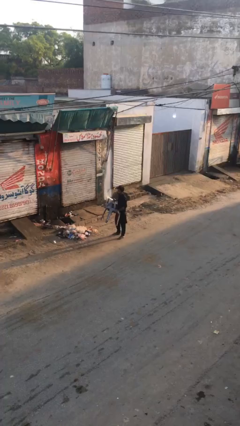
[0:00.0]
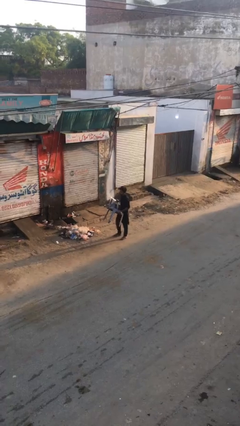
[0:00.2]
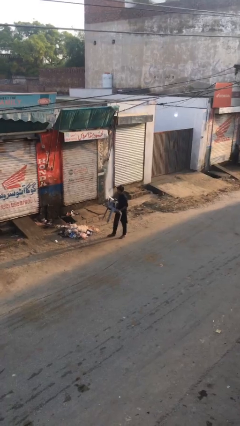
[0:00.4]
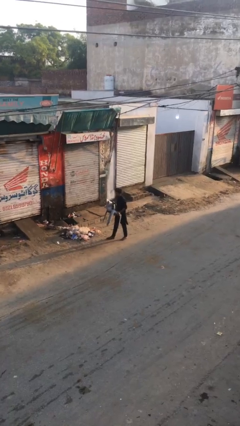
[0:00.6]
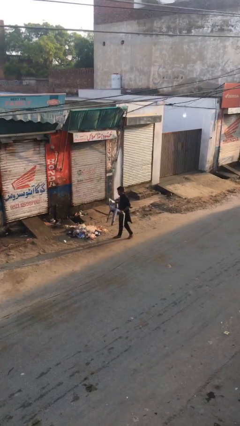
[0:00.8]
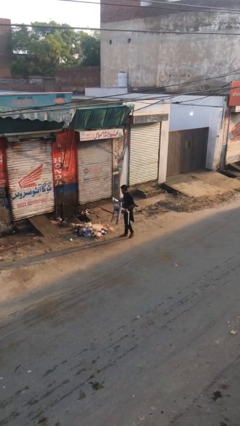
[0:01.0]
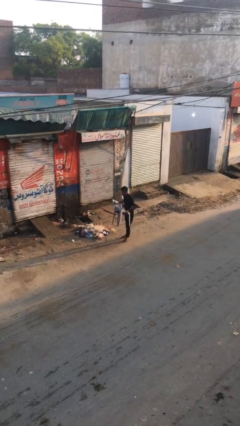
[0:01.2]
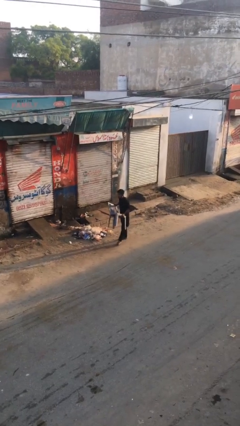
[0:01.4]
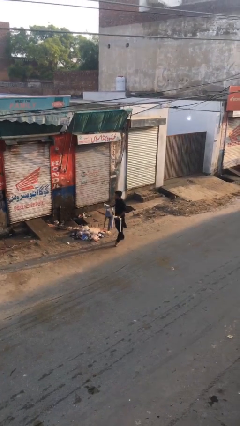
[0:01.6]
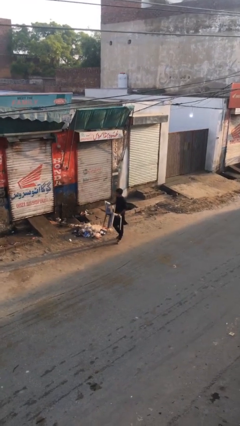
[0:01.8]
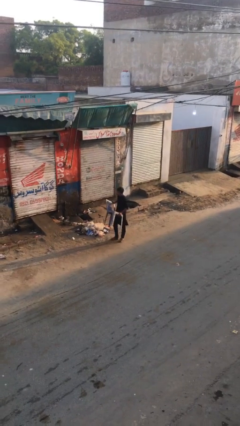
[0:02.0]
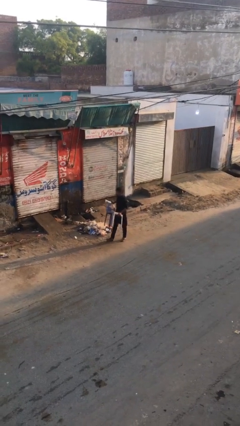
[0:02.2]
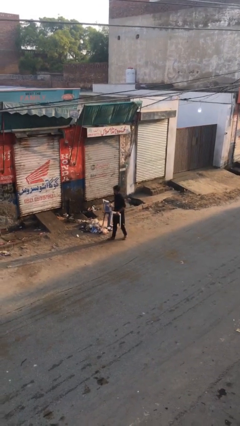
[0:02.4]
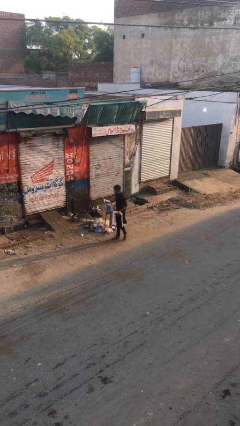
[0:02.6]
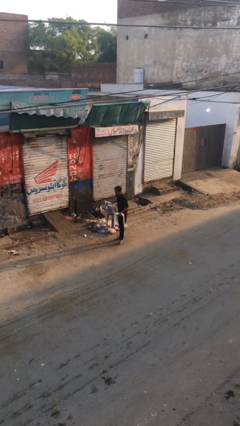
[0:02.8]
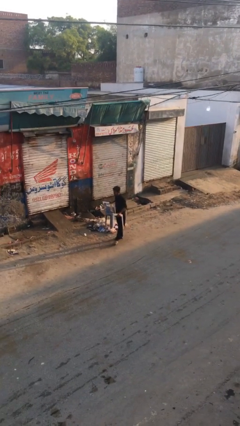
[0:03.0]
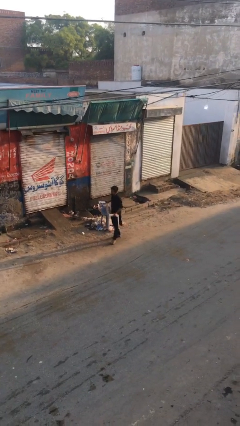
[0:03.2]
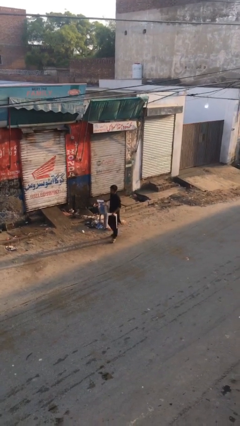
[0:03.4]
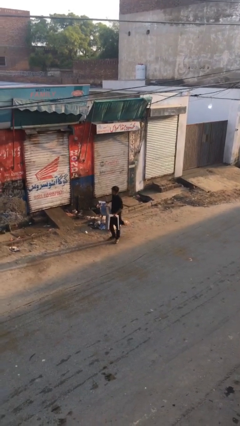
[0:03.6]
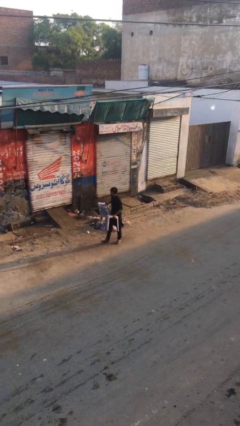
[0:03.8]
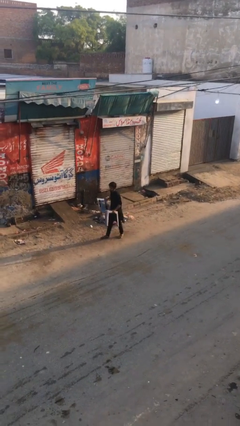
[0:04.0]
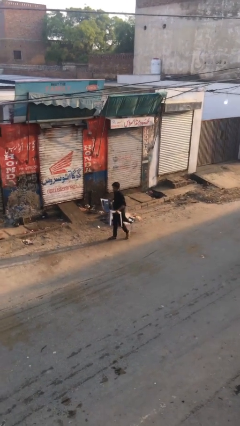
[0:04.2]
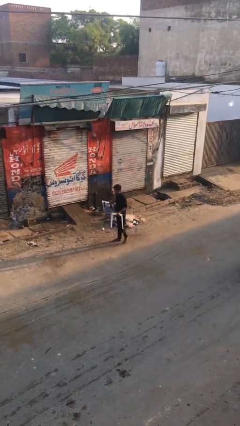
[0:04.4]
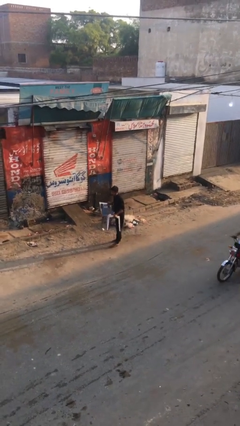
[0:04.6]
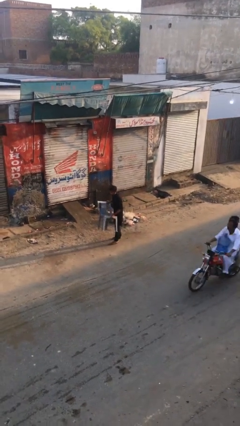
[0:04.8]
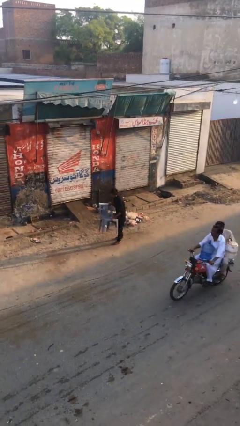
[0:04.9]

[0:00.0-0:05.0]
person carries heavy object

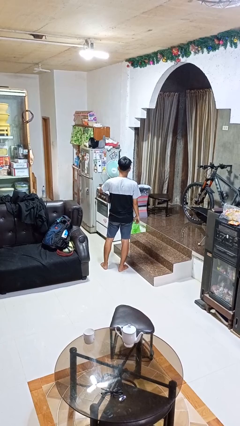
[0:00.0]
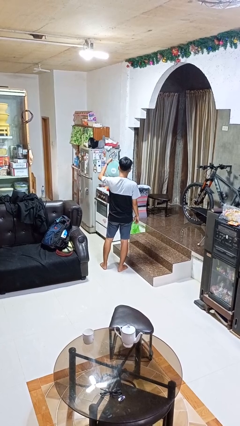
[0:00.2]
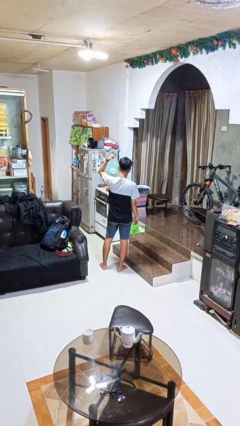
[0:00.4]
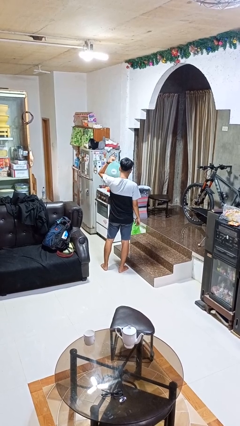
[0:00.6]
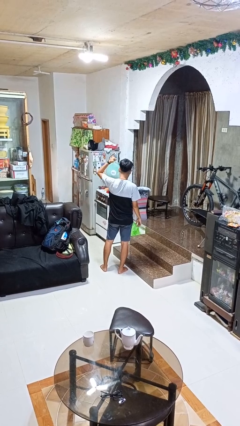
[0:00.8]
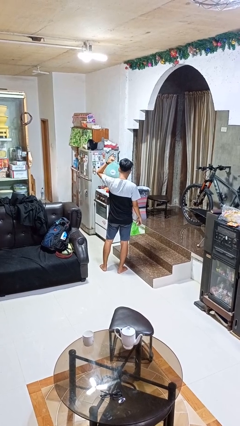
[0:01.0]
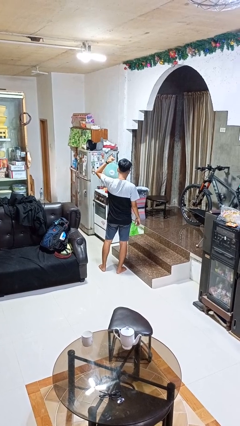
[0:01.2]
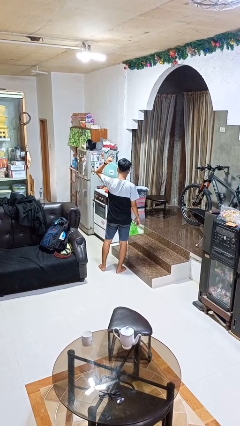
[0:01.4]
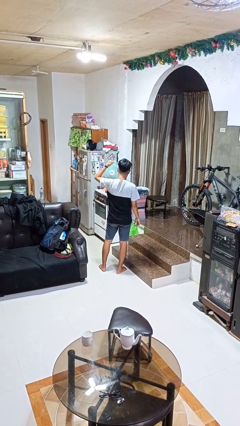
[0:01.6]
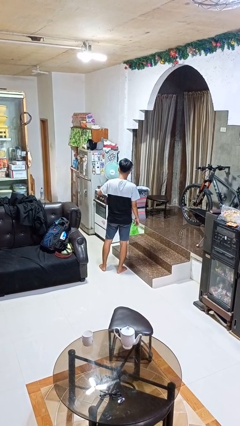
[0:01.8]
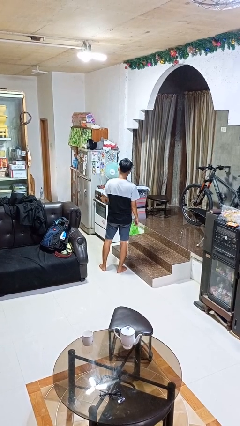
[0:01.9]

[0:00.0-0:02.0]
person gestures behind me

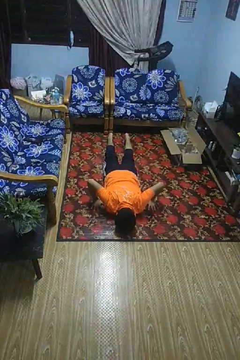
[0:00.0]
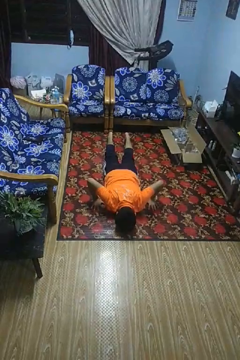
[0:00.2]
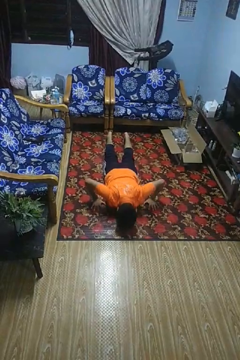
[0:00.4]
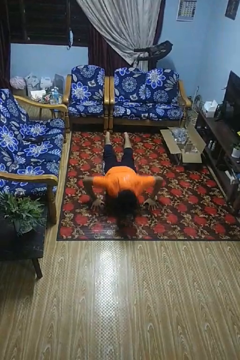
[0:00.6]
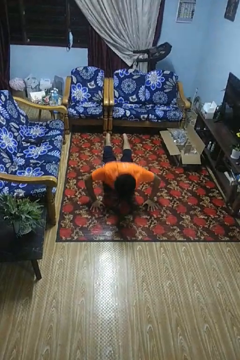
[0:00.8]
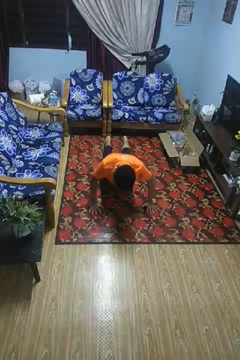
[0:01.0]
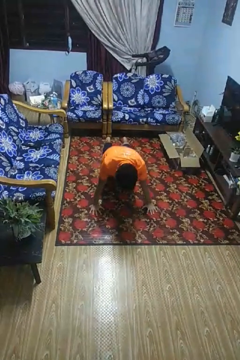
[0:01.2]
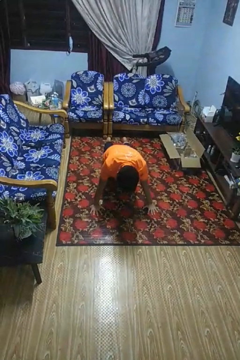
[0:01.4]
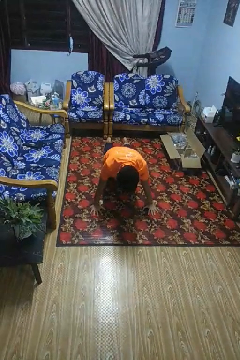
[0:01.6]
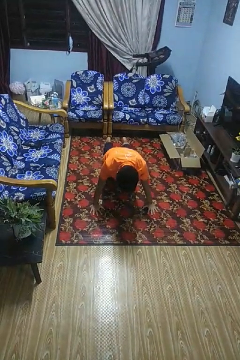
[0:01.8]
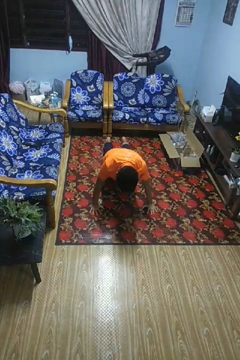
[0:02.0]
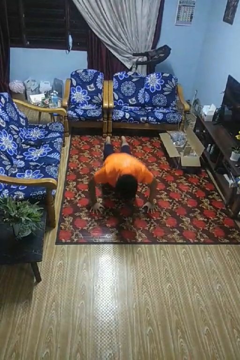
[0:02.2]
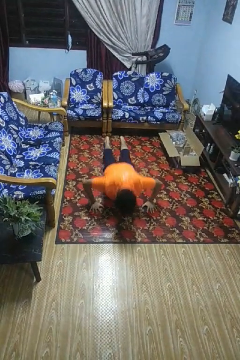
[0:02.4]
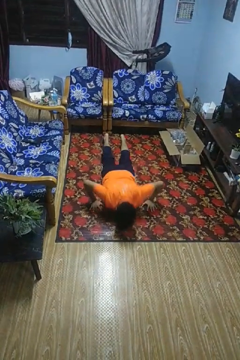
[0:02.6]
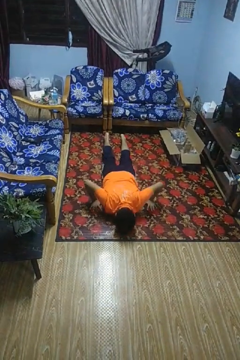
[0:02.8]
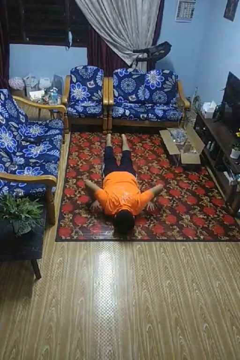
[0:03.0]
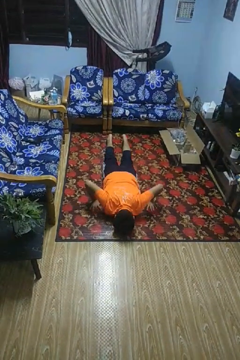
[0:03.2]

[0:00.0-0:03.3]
person exercises with pushup

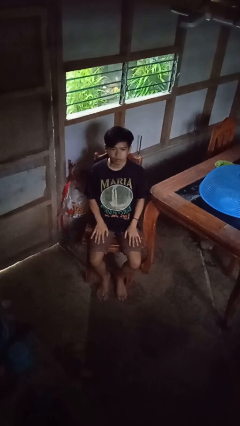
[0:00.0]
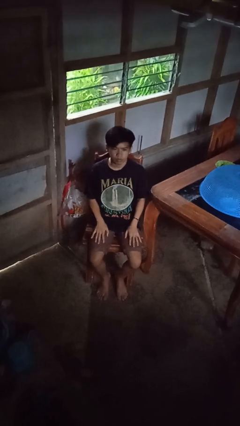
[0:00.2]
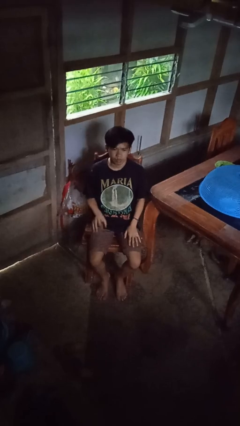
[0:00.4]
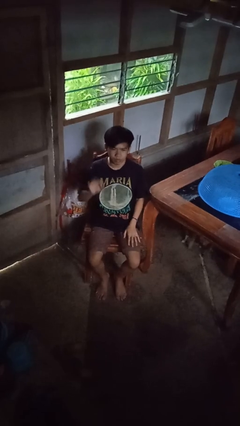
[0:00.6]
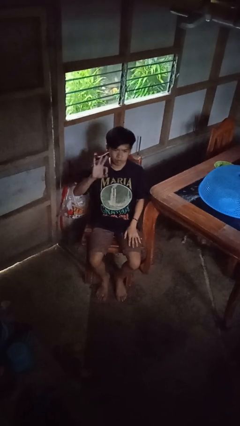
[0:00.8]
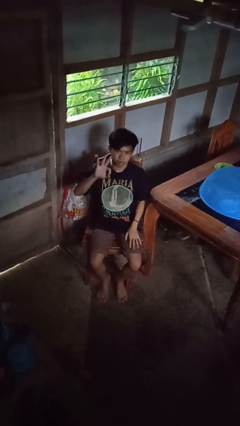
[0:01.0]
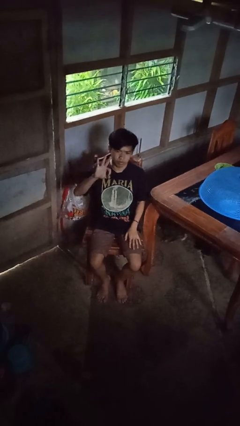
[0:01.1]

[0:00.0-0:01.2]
person gestures number three

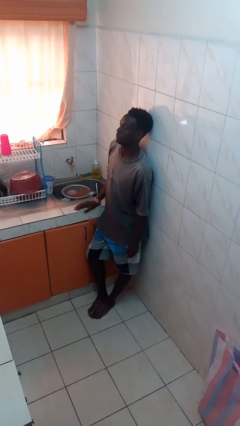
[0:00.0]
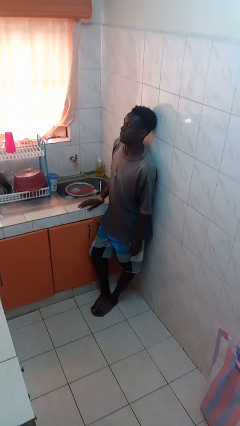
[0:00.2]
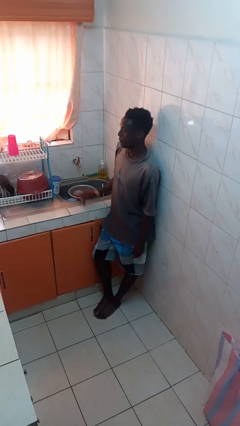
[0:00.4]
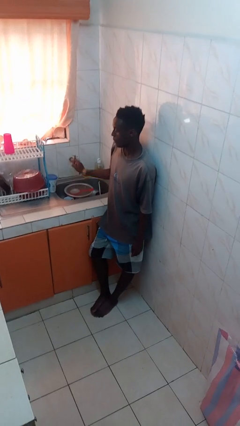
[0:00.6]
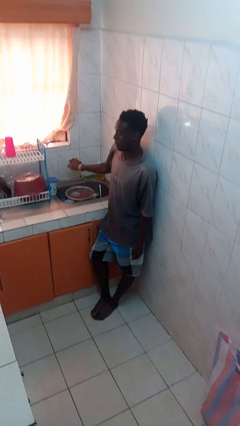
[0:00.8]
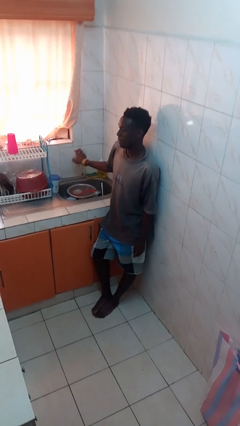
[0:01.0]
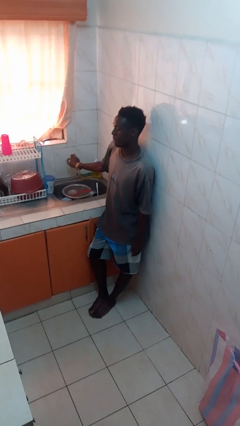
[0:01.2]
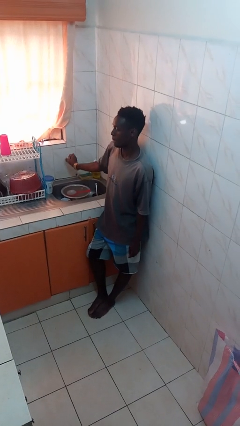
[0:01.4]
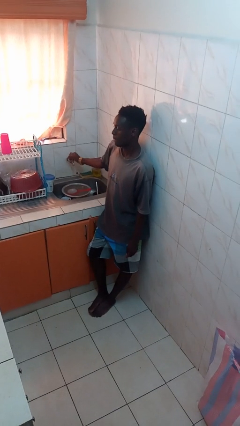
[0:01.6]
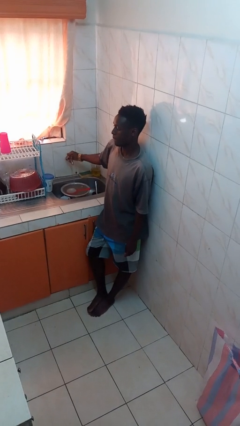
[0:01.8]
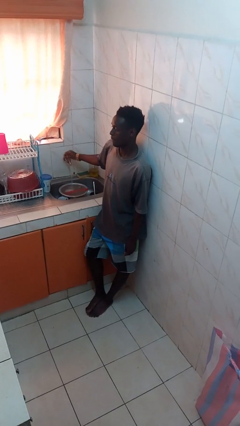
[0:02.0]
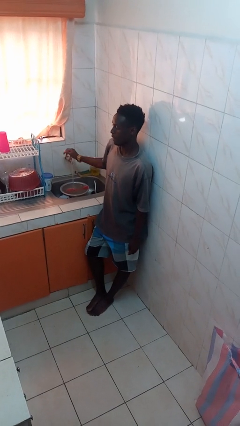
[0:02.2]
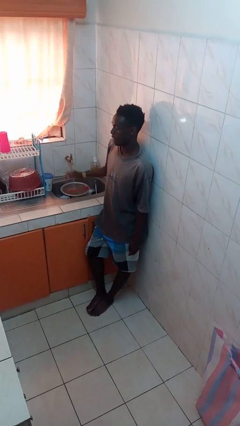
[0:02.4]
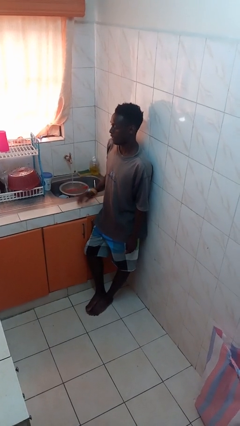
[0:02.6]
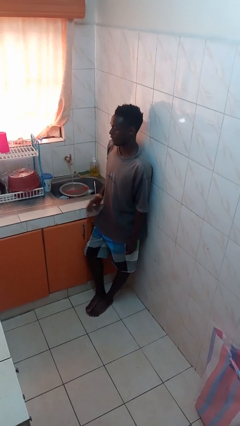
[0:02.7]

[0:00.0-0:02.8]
person turns on faucet

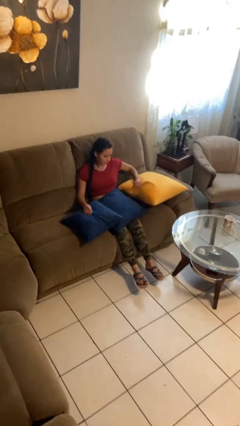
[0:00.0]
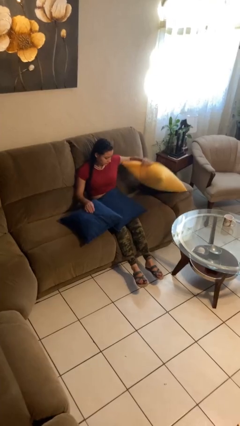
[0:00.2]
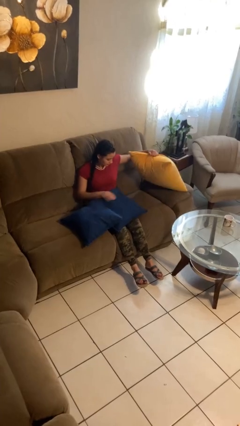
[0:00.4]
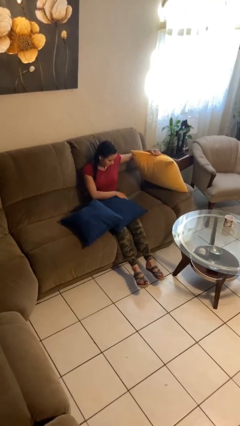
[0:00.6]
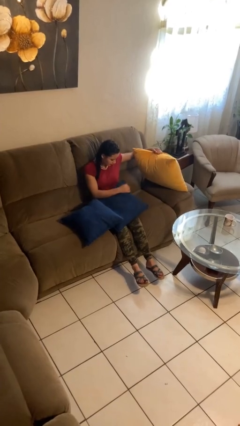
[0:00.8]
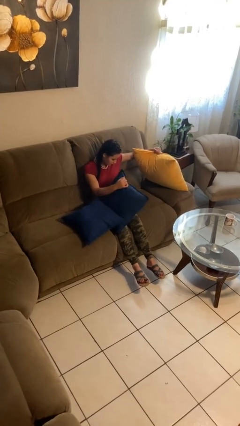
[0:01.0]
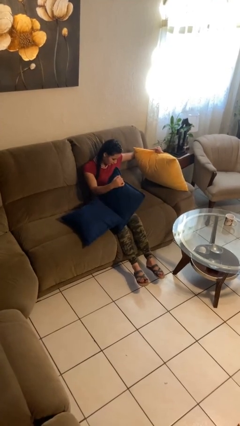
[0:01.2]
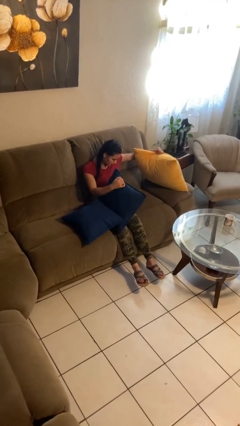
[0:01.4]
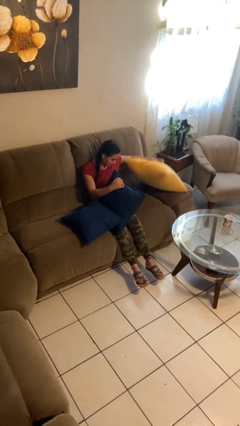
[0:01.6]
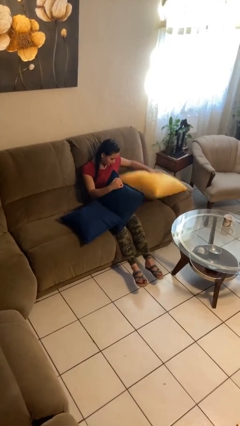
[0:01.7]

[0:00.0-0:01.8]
person searches in couch

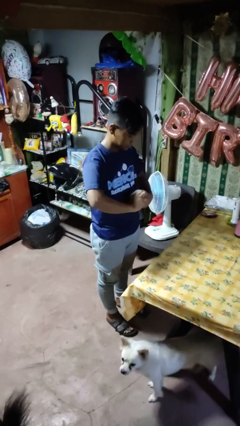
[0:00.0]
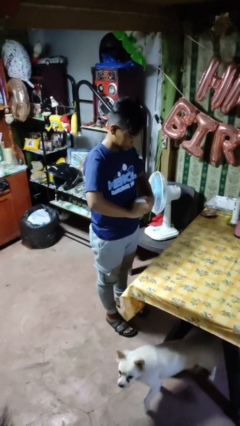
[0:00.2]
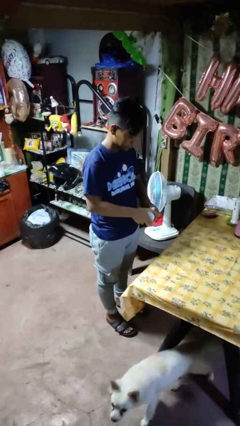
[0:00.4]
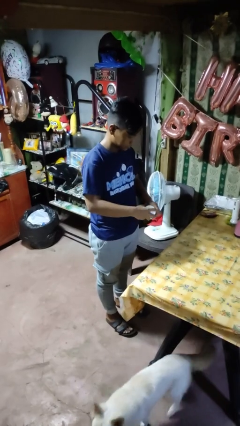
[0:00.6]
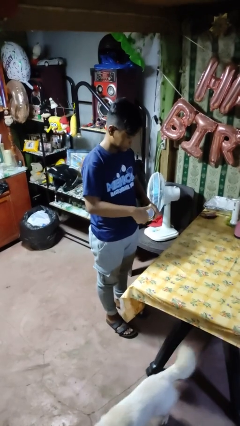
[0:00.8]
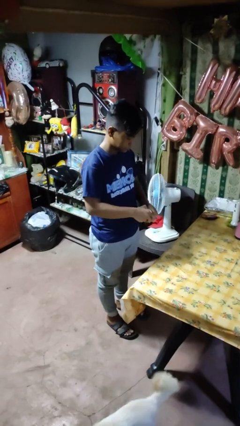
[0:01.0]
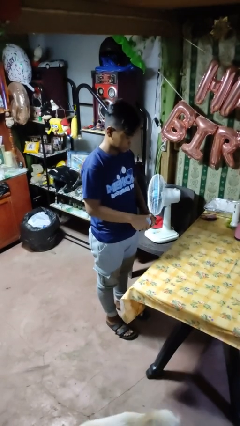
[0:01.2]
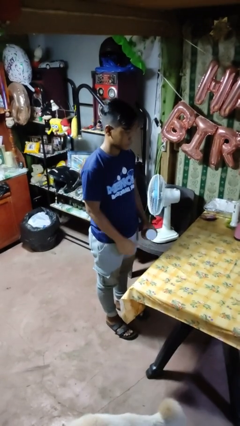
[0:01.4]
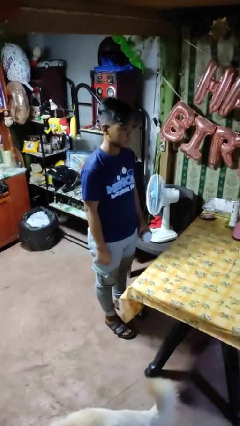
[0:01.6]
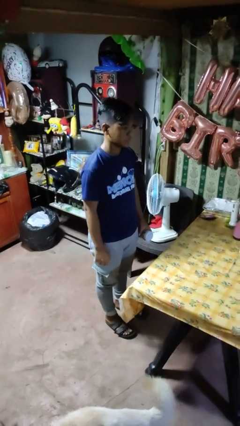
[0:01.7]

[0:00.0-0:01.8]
person closes jar

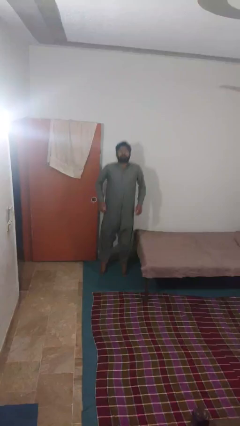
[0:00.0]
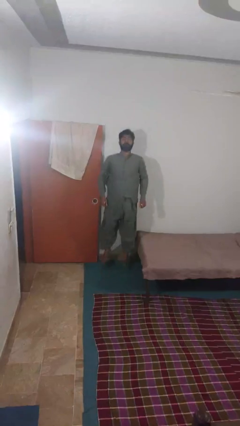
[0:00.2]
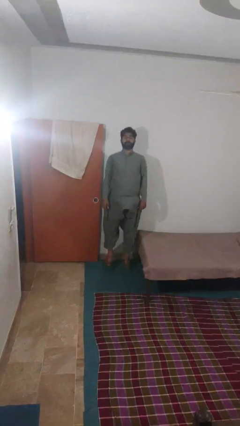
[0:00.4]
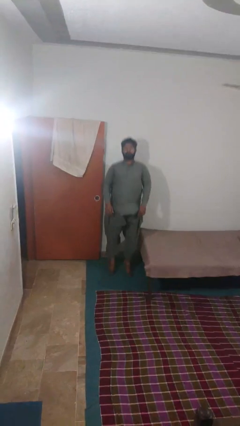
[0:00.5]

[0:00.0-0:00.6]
person jumps
